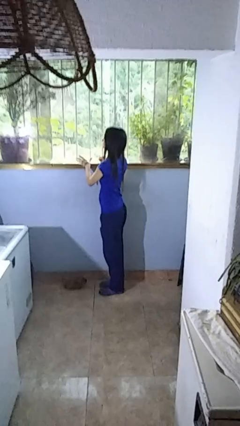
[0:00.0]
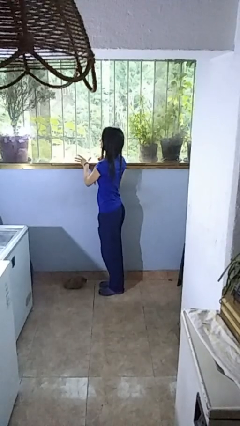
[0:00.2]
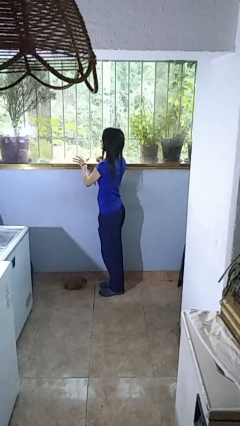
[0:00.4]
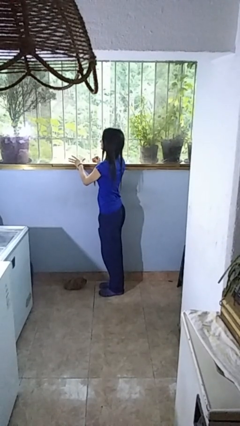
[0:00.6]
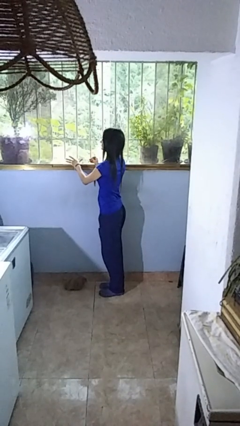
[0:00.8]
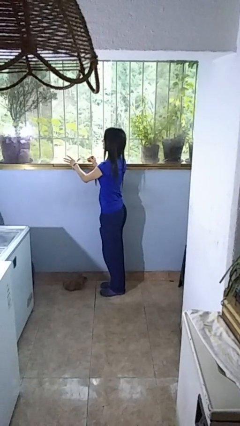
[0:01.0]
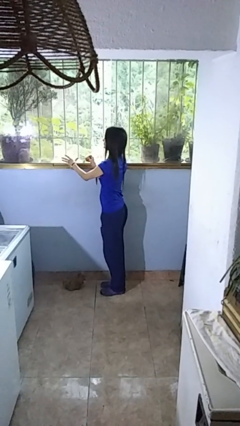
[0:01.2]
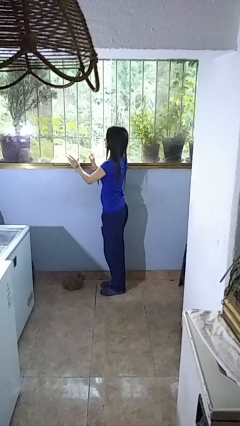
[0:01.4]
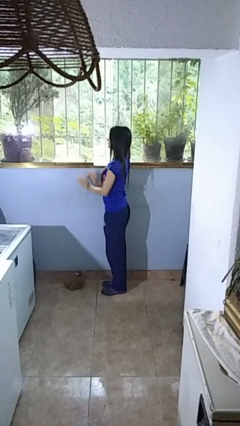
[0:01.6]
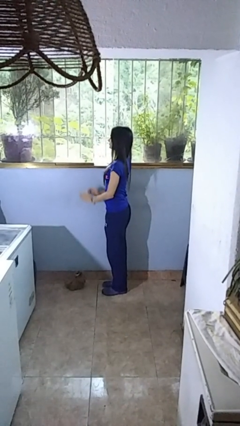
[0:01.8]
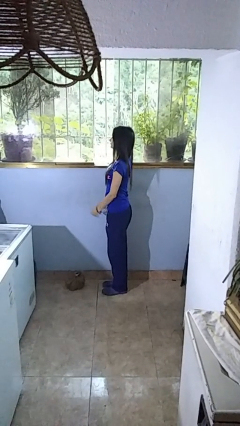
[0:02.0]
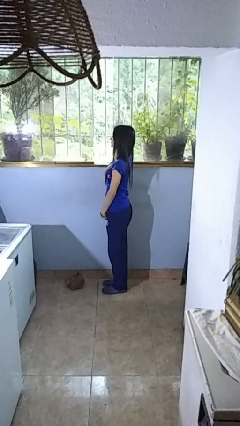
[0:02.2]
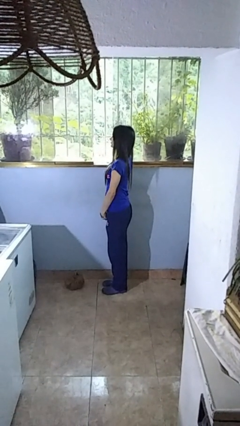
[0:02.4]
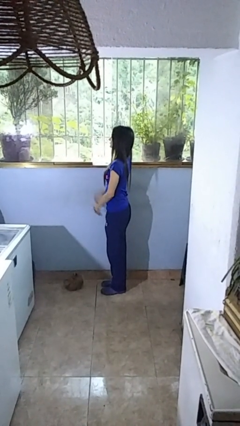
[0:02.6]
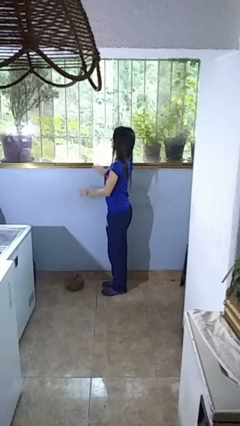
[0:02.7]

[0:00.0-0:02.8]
person opens home window

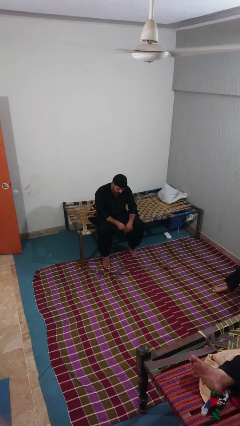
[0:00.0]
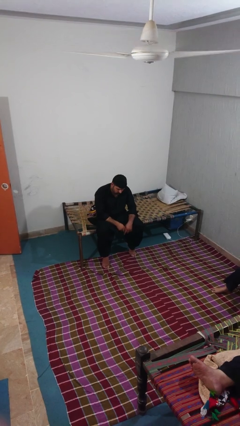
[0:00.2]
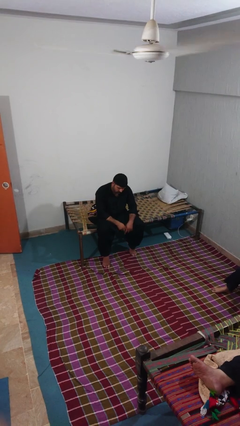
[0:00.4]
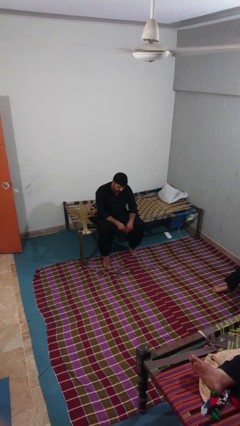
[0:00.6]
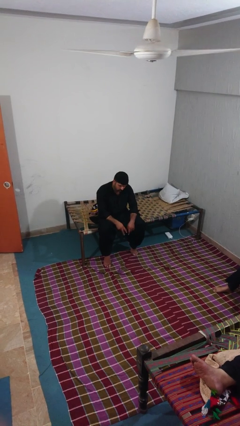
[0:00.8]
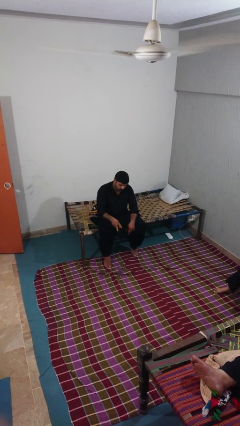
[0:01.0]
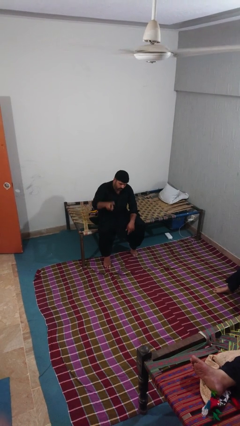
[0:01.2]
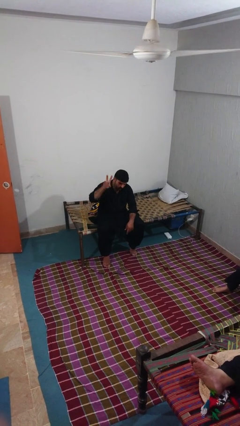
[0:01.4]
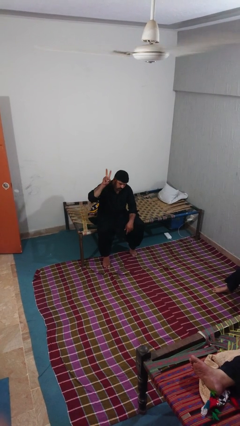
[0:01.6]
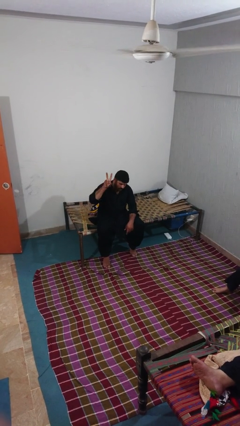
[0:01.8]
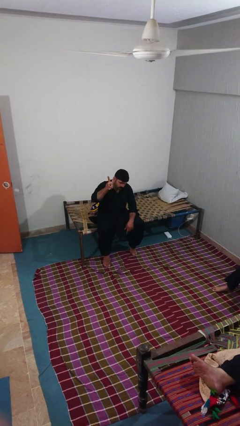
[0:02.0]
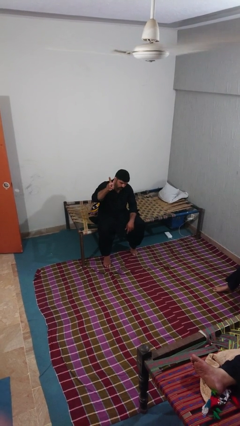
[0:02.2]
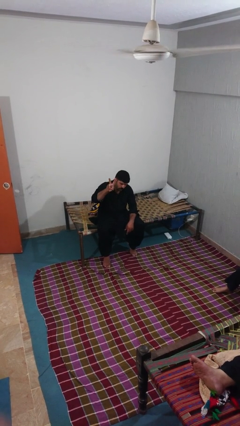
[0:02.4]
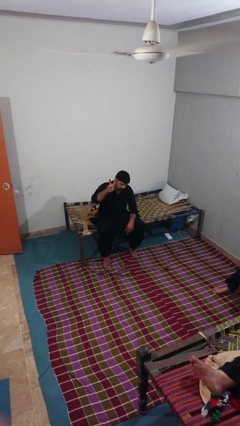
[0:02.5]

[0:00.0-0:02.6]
person gestures peace

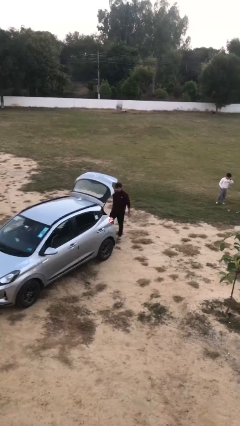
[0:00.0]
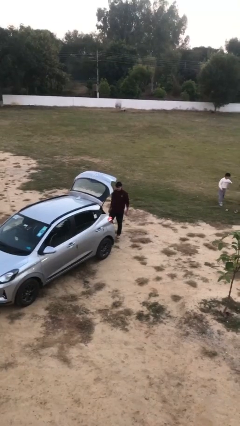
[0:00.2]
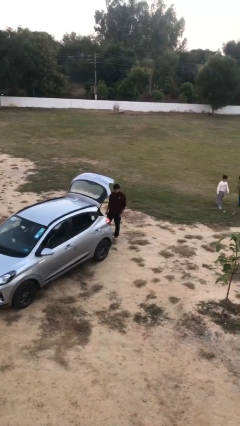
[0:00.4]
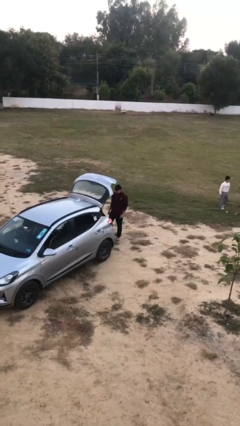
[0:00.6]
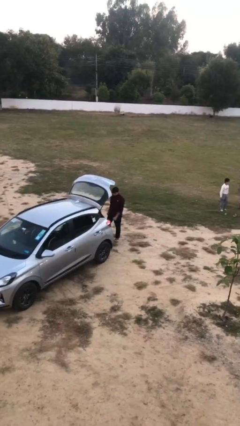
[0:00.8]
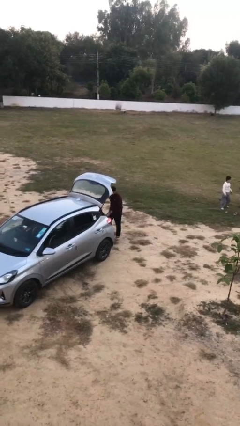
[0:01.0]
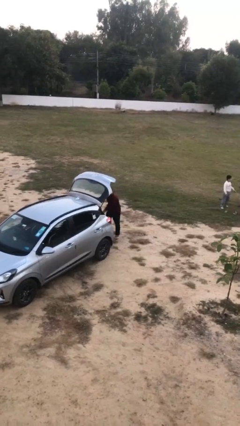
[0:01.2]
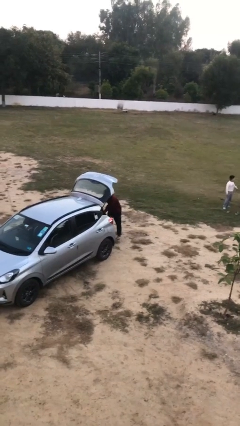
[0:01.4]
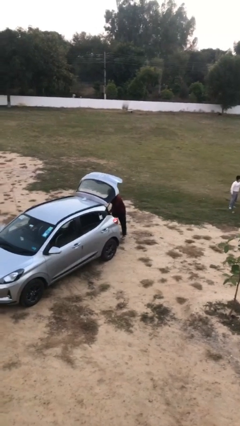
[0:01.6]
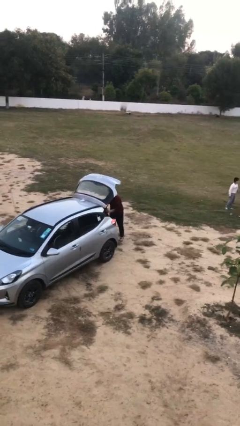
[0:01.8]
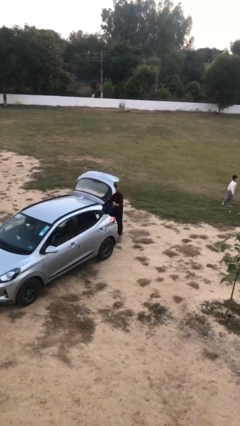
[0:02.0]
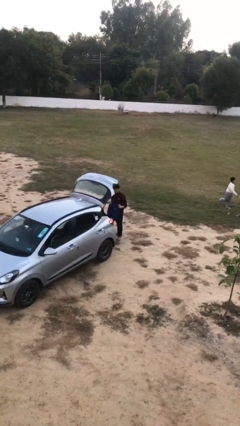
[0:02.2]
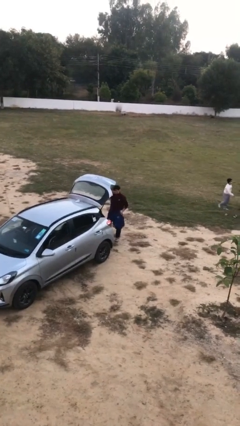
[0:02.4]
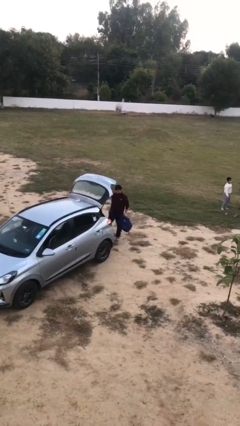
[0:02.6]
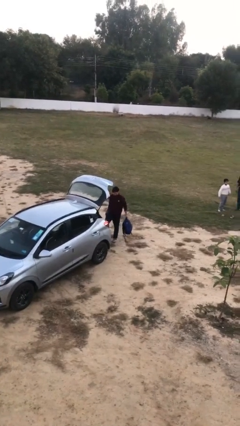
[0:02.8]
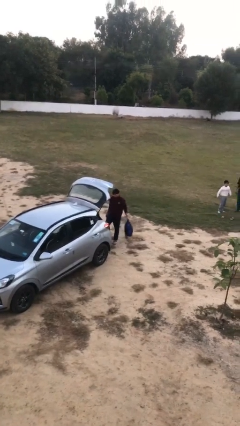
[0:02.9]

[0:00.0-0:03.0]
person unloads car

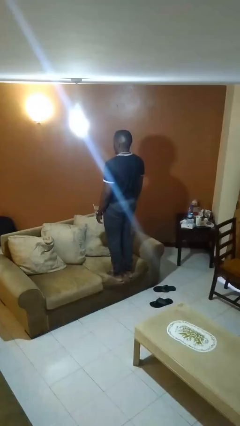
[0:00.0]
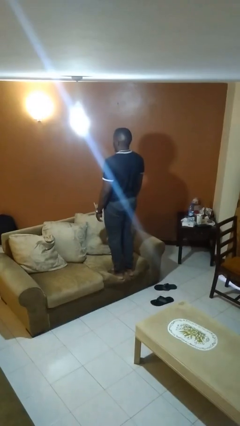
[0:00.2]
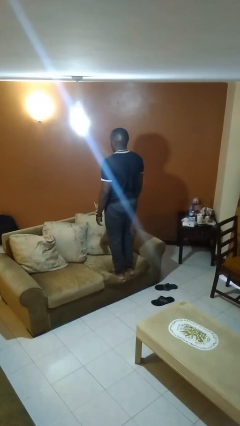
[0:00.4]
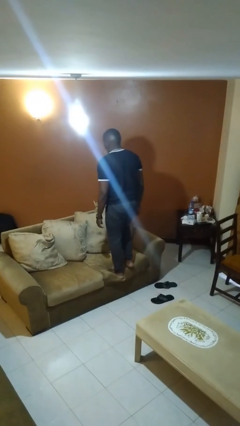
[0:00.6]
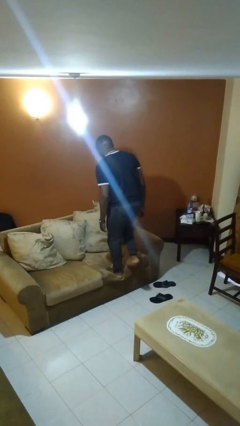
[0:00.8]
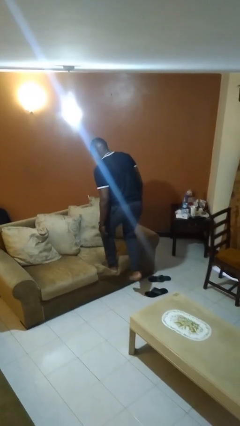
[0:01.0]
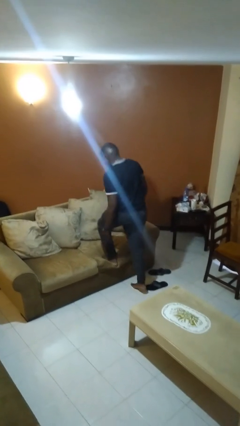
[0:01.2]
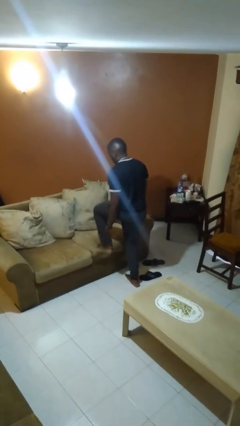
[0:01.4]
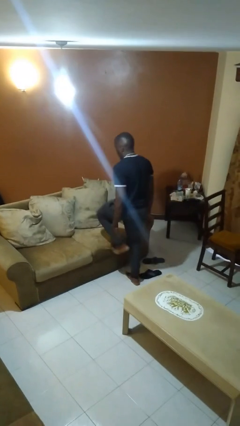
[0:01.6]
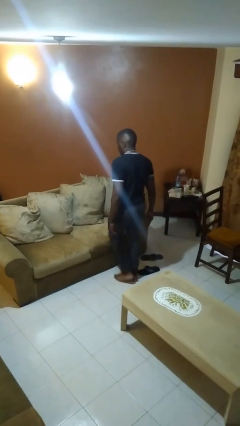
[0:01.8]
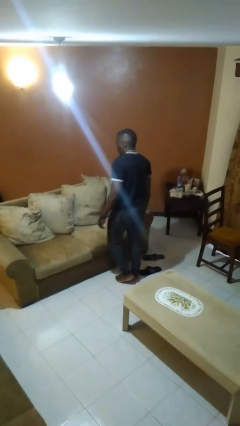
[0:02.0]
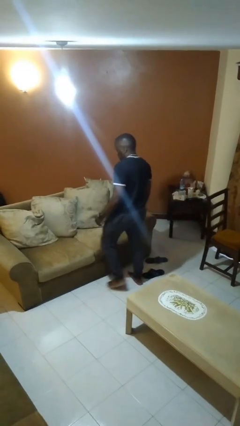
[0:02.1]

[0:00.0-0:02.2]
person climbs off couch

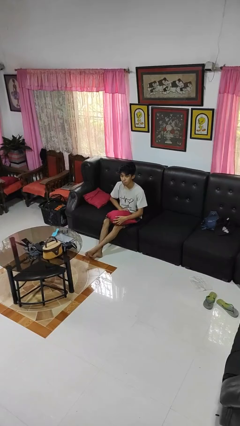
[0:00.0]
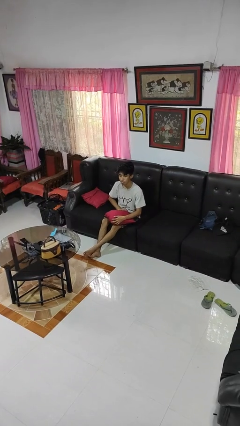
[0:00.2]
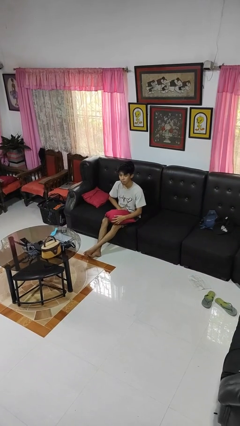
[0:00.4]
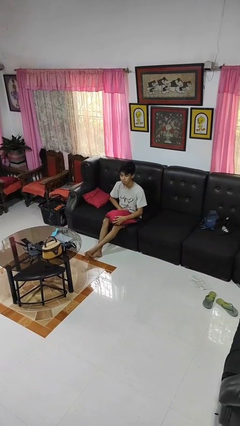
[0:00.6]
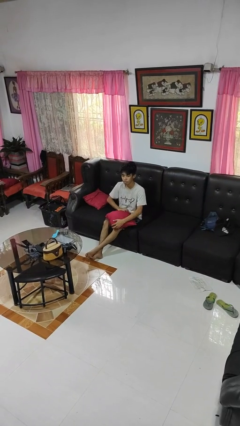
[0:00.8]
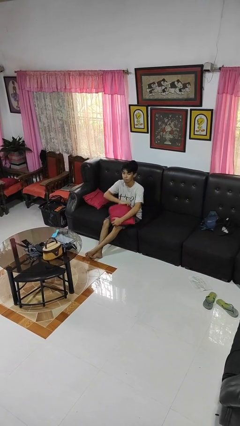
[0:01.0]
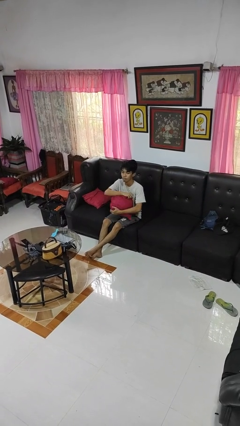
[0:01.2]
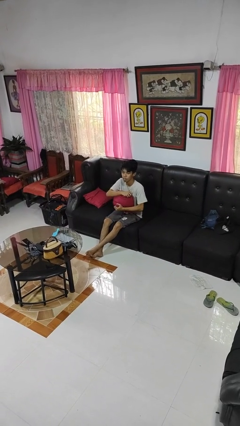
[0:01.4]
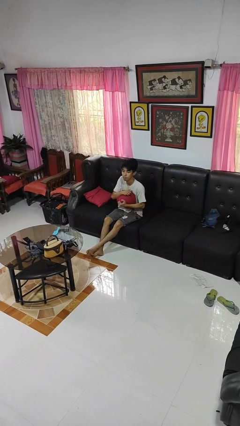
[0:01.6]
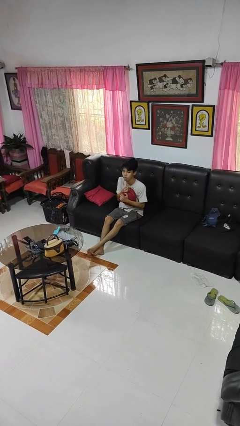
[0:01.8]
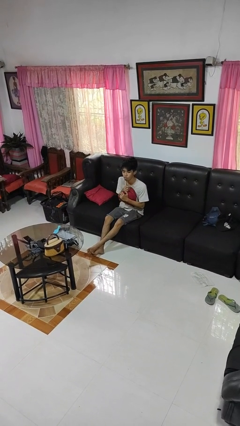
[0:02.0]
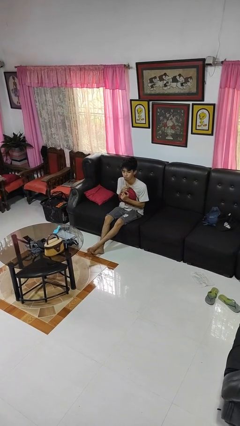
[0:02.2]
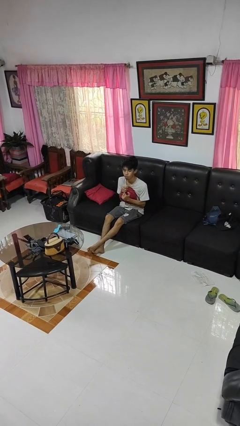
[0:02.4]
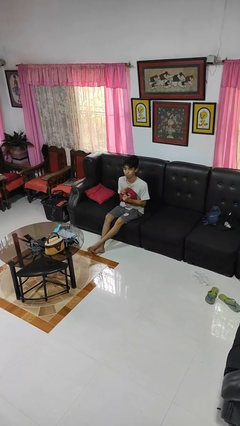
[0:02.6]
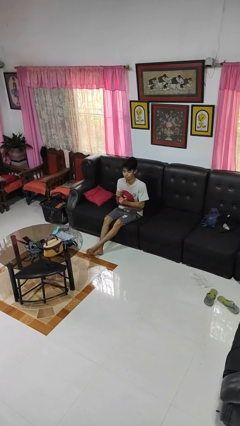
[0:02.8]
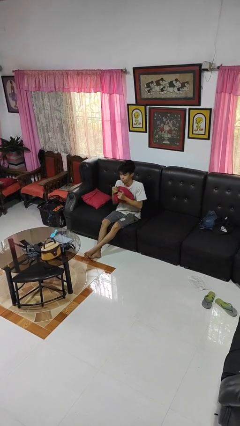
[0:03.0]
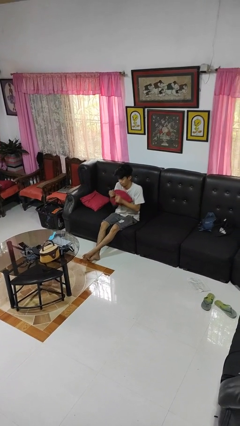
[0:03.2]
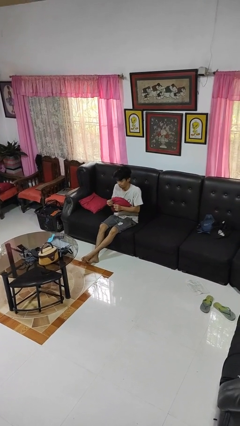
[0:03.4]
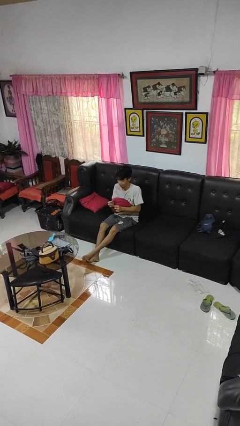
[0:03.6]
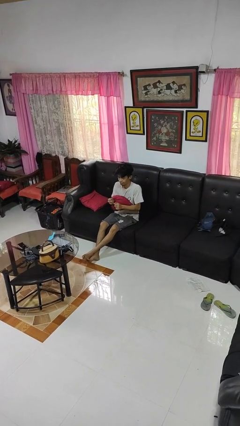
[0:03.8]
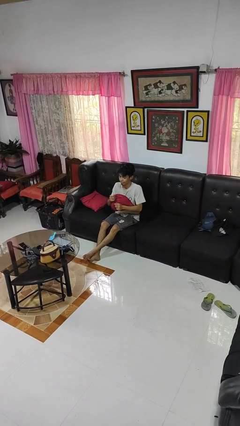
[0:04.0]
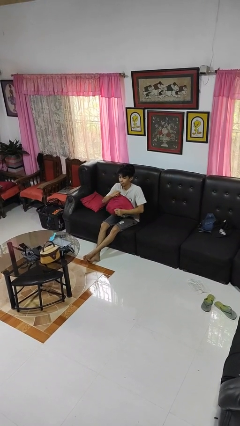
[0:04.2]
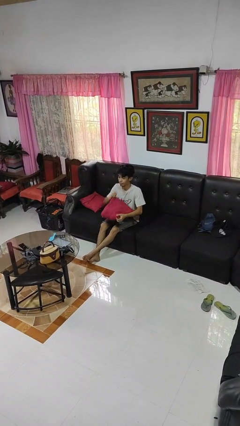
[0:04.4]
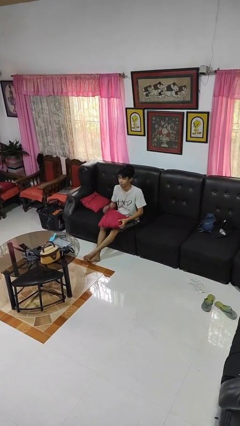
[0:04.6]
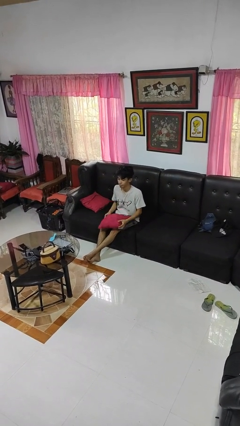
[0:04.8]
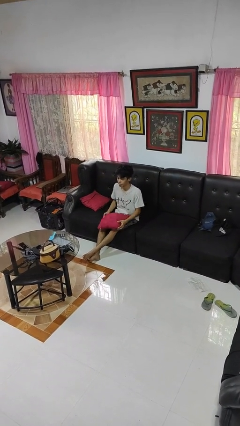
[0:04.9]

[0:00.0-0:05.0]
person squeezes object

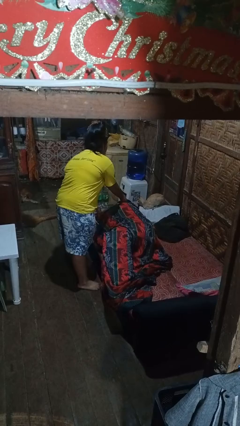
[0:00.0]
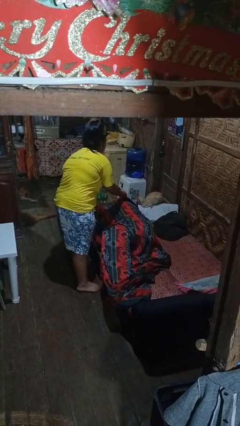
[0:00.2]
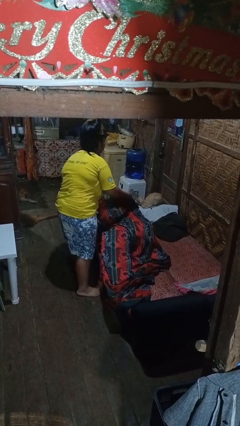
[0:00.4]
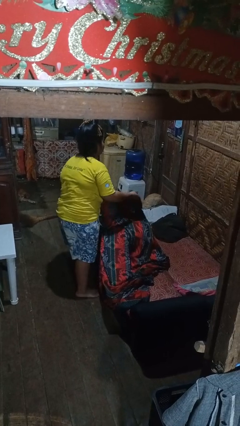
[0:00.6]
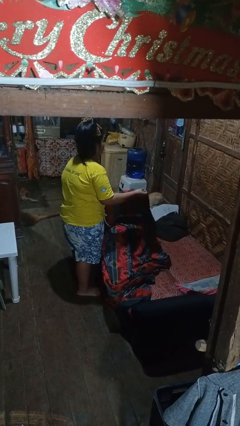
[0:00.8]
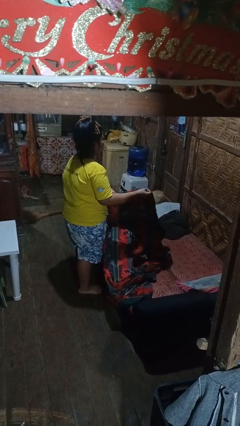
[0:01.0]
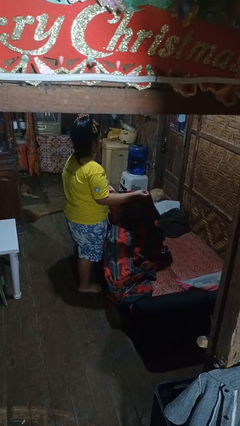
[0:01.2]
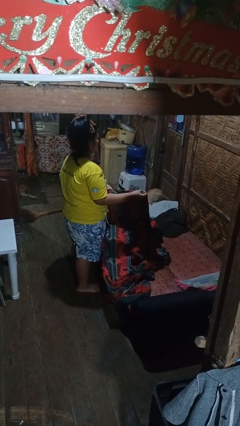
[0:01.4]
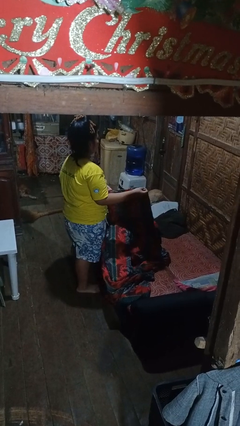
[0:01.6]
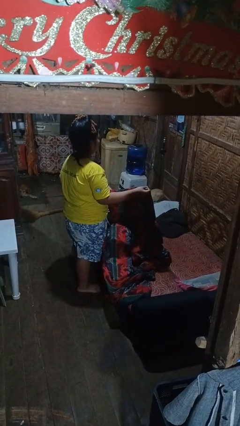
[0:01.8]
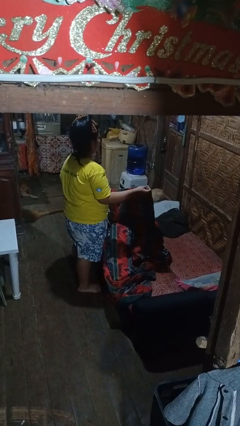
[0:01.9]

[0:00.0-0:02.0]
person uncovers friend with blanket
